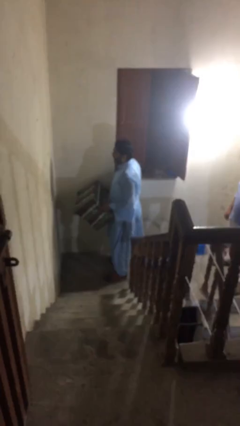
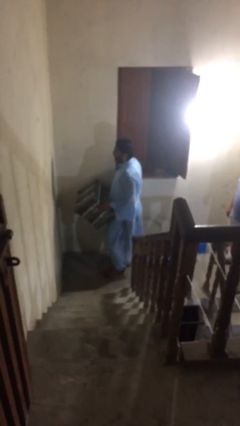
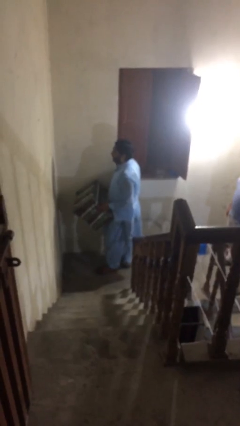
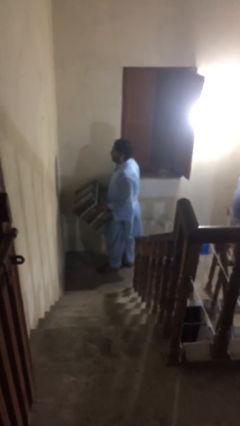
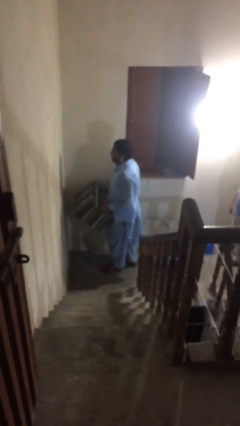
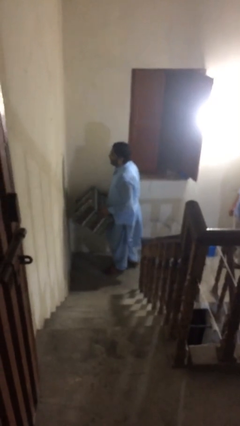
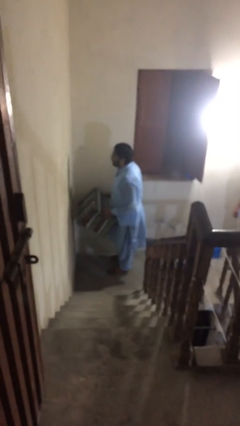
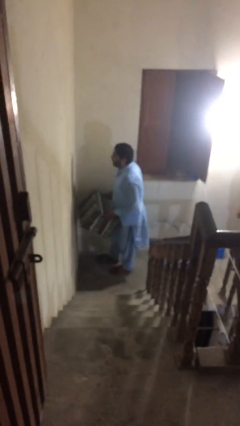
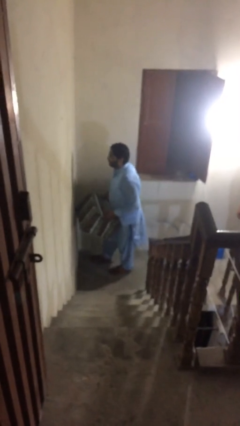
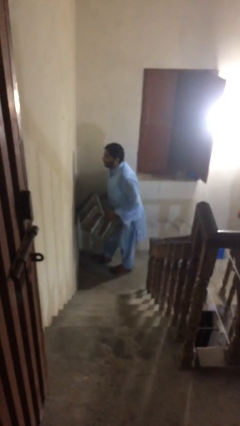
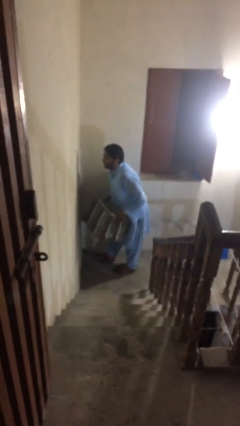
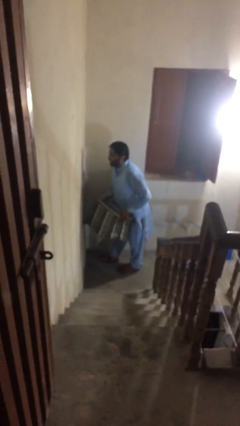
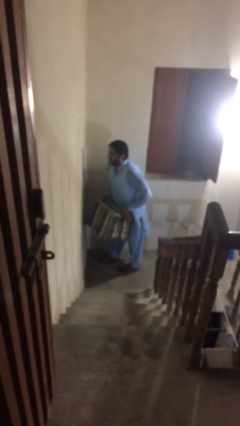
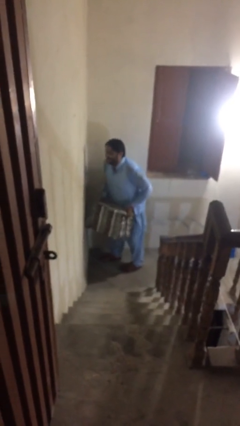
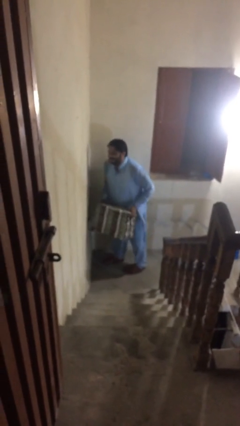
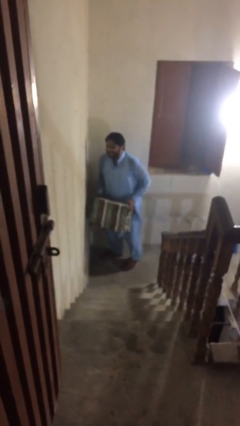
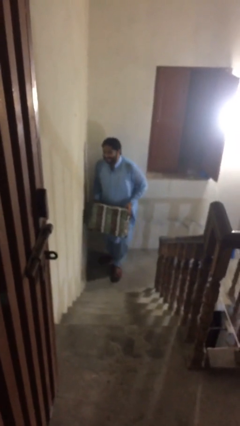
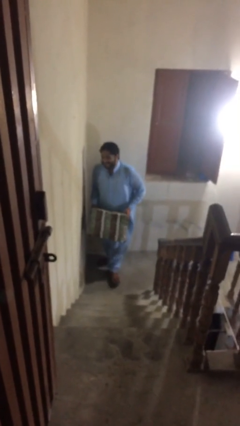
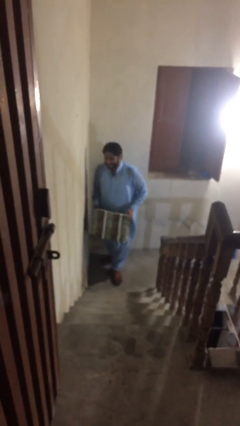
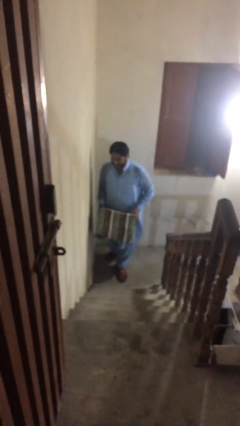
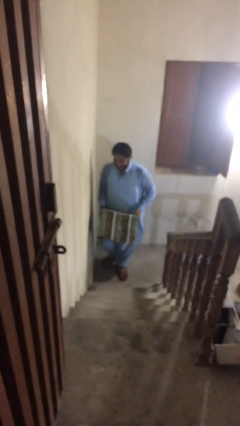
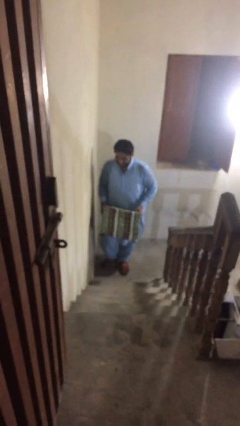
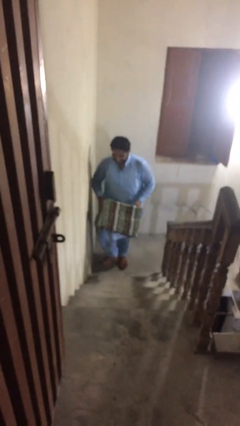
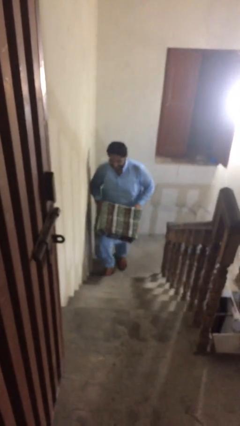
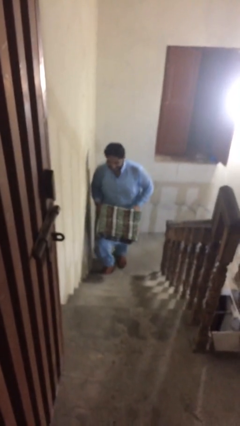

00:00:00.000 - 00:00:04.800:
person carries heavy object

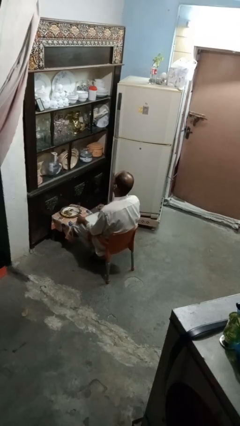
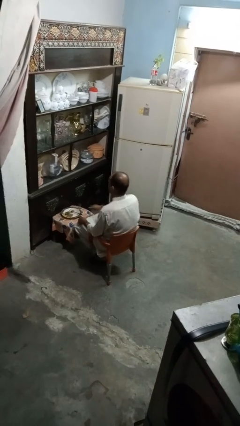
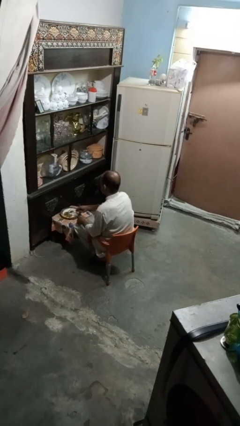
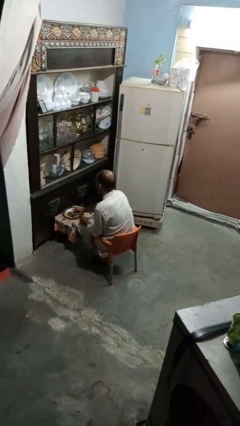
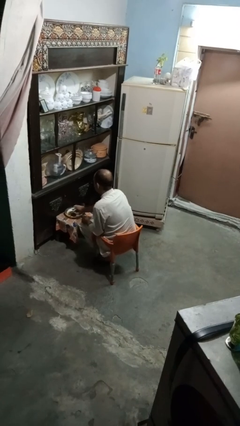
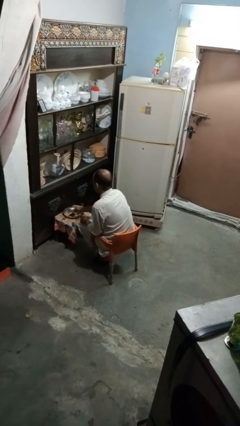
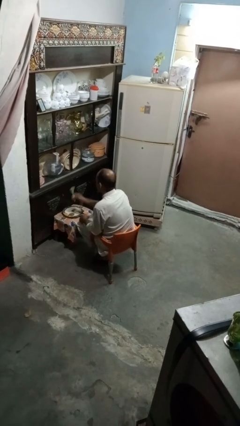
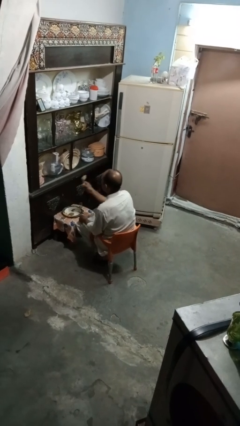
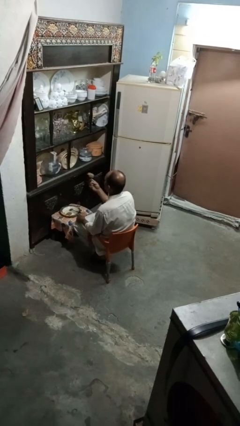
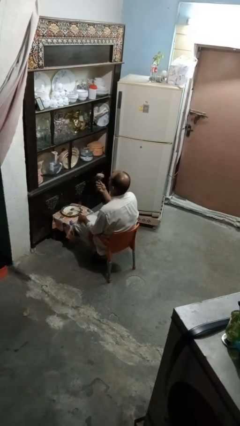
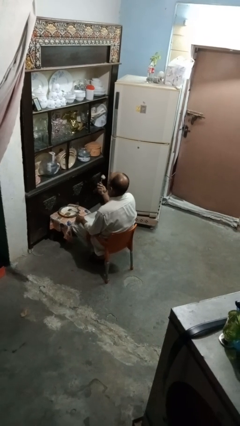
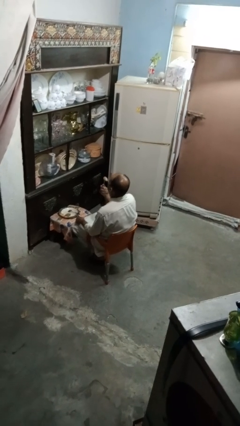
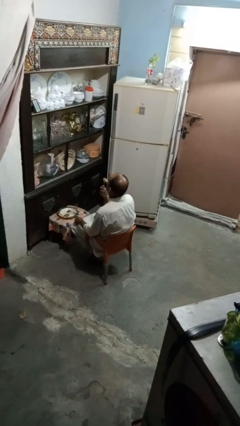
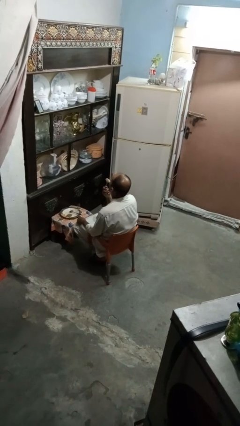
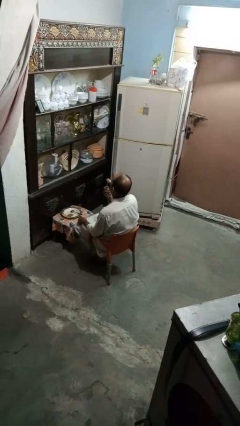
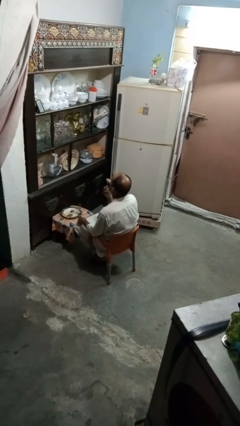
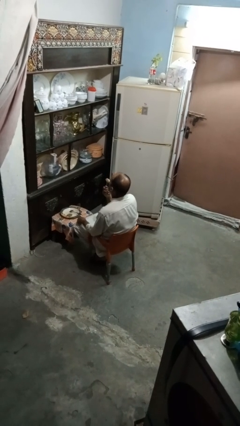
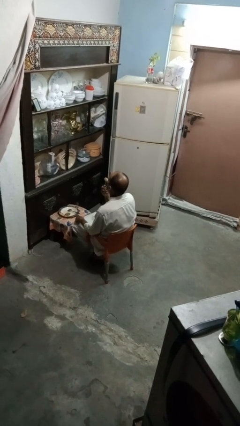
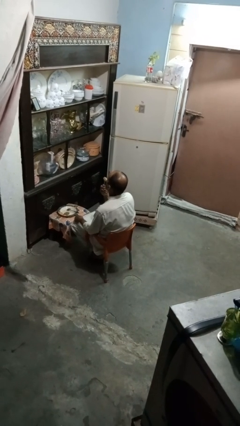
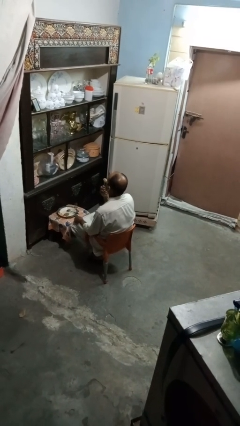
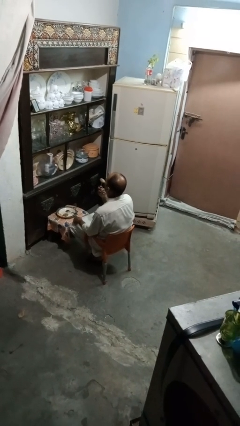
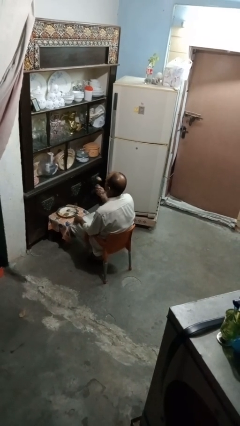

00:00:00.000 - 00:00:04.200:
person eats with utensil

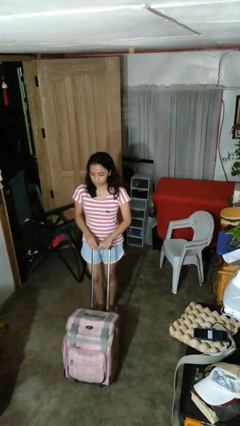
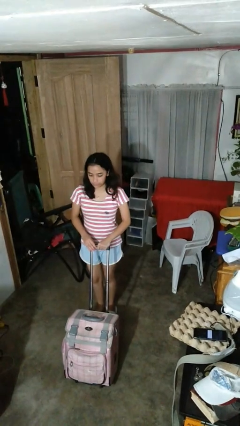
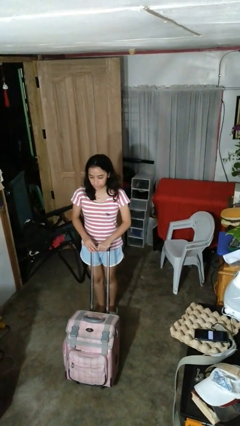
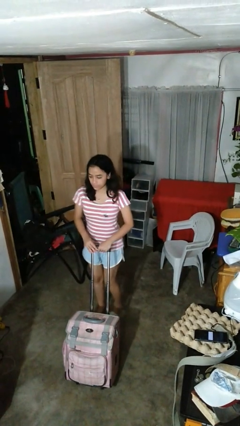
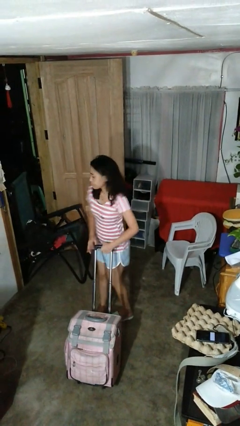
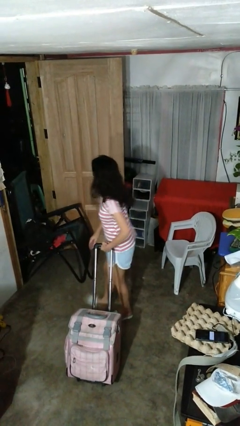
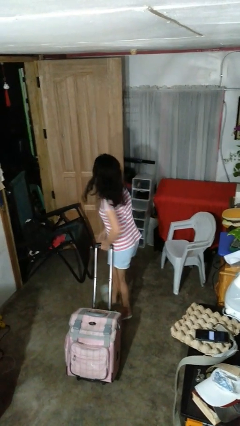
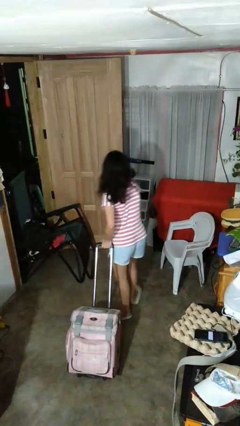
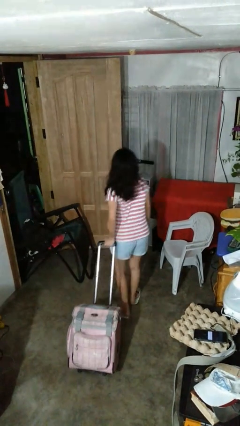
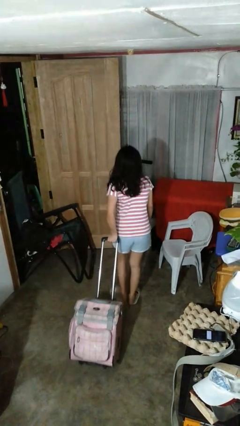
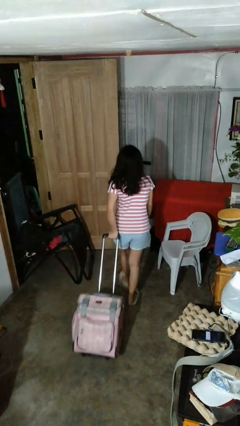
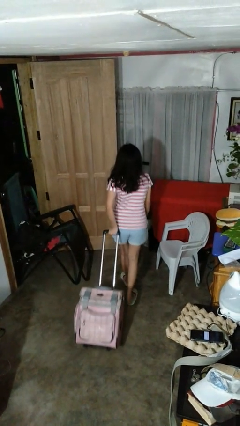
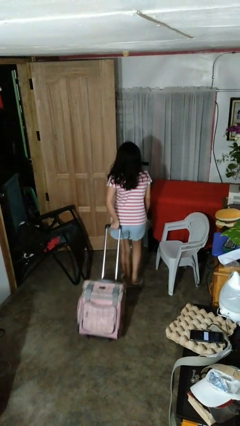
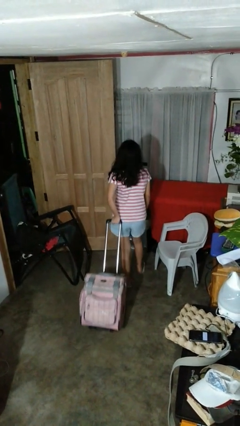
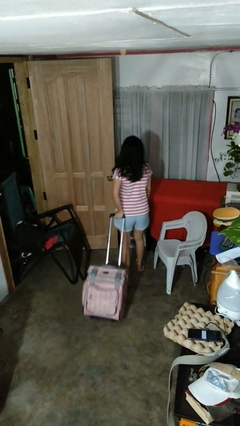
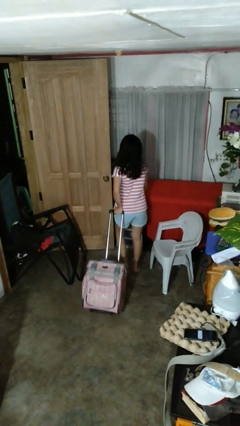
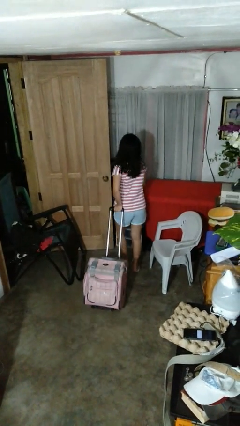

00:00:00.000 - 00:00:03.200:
person pulls wheeled cart

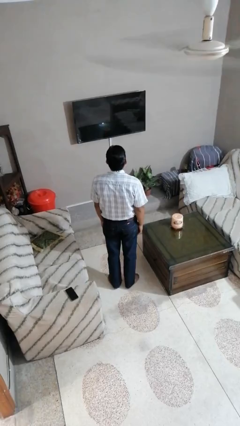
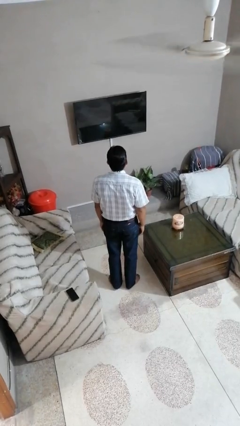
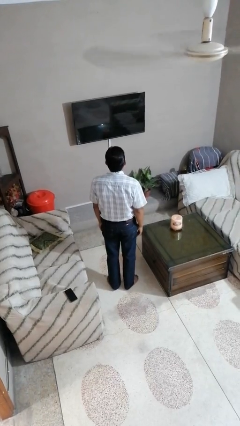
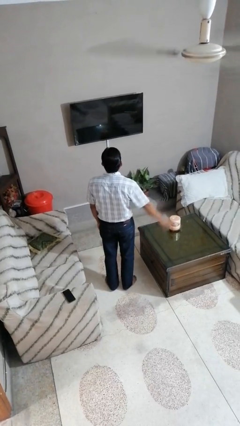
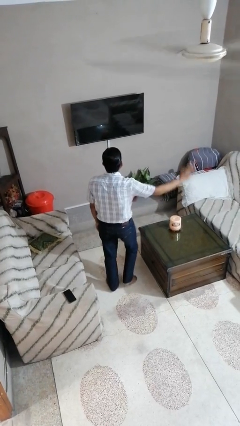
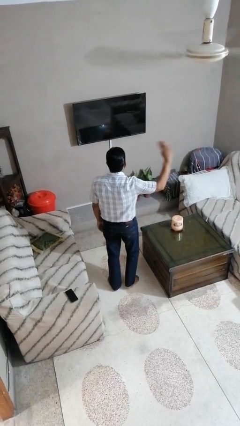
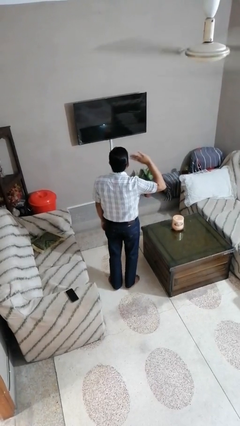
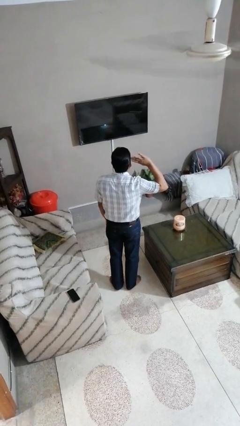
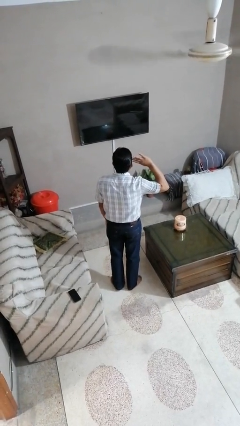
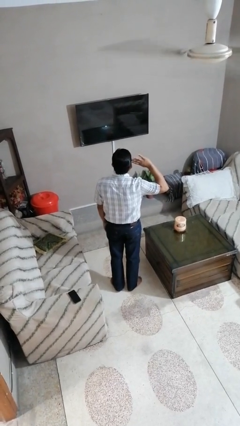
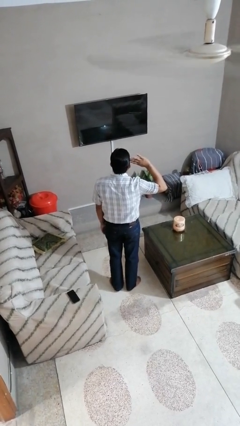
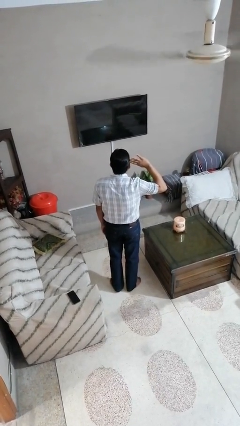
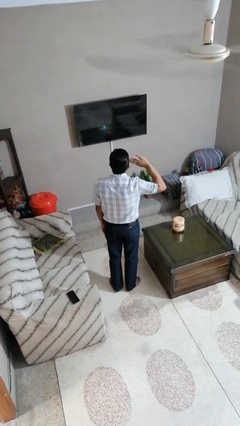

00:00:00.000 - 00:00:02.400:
person salutes

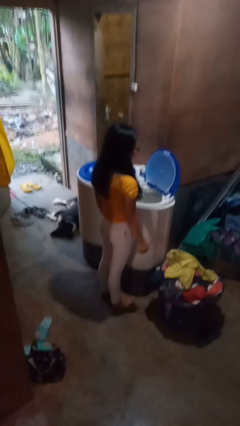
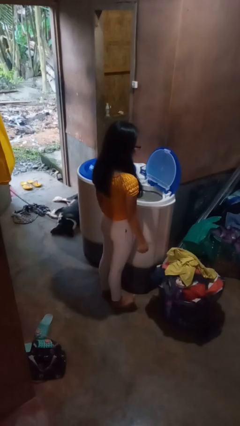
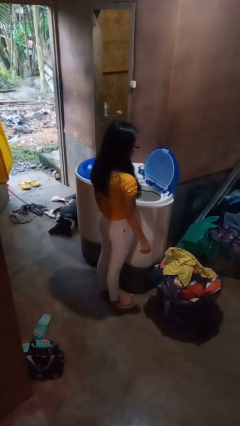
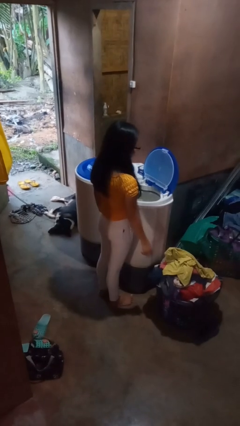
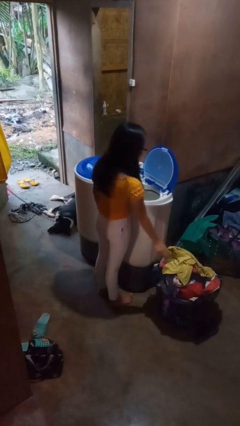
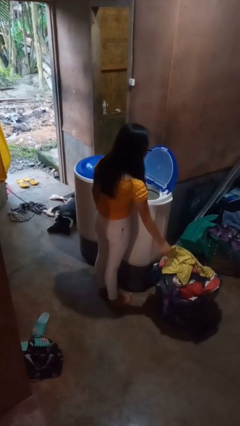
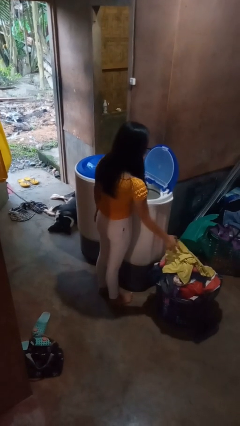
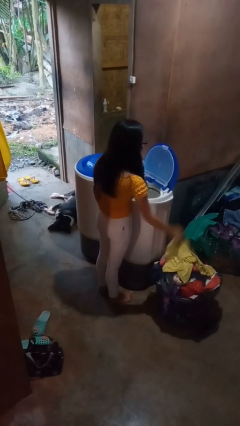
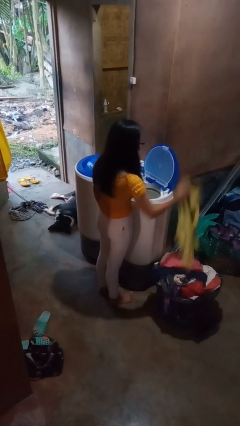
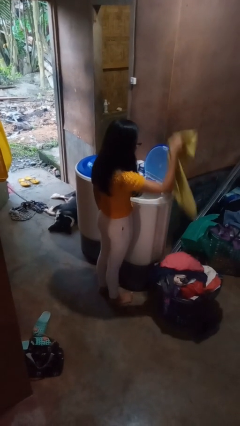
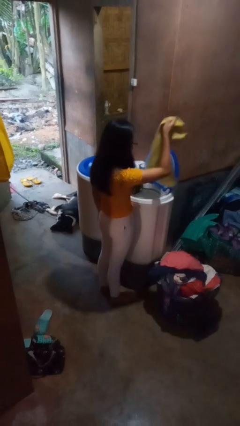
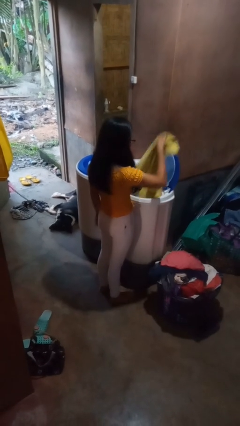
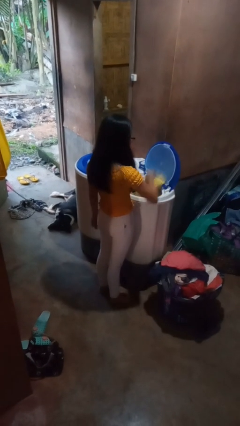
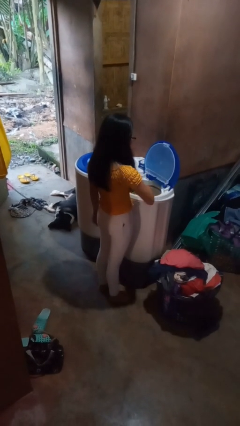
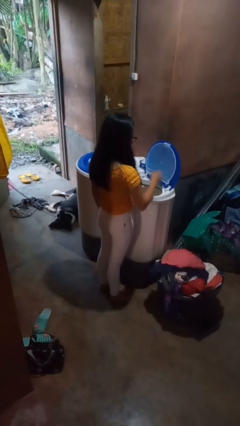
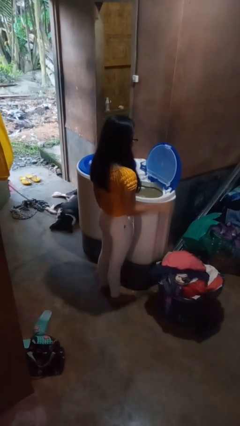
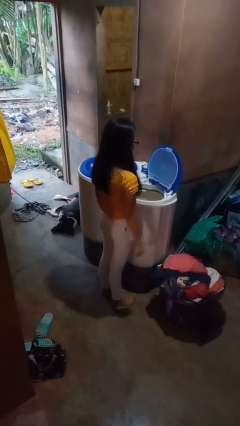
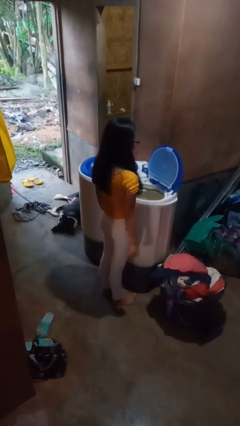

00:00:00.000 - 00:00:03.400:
person loads dryer
